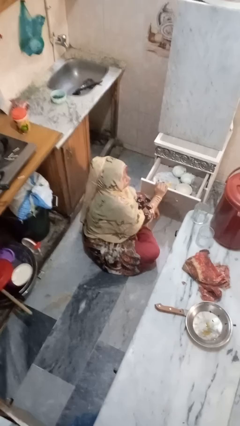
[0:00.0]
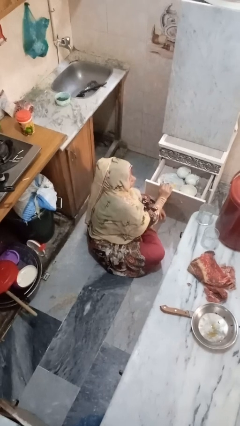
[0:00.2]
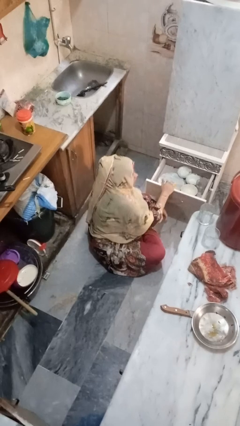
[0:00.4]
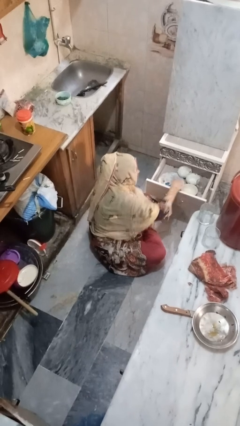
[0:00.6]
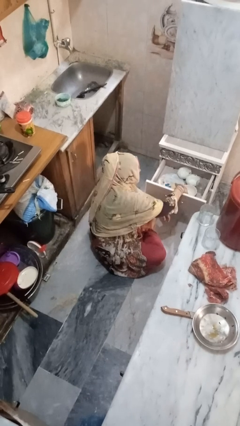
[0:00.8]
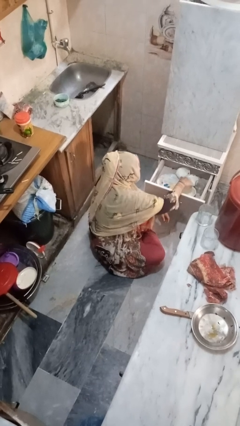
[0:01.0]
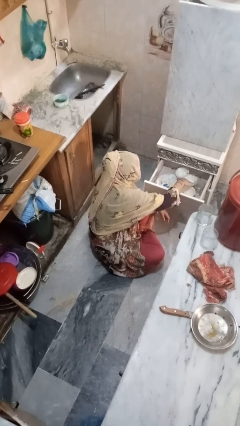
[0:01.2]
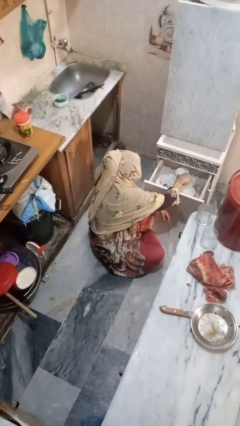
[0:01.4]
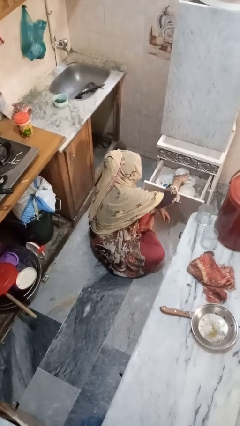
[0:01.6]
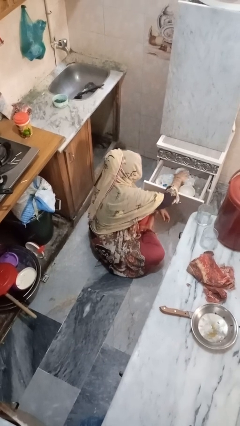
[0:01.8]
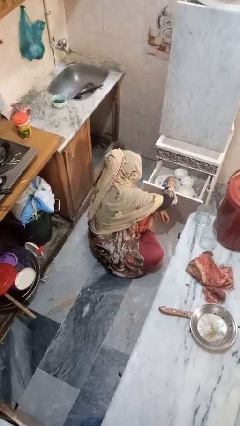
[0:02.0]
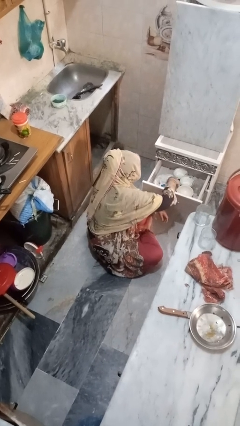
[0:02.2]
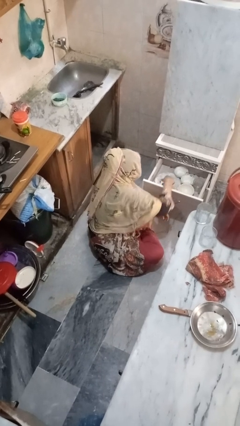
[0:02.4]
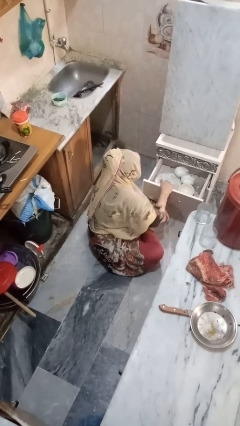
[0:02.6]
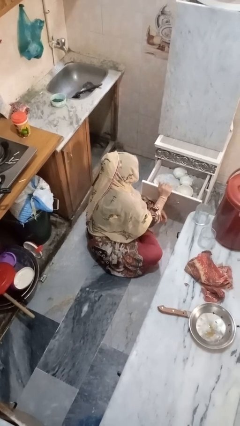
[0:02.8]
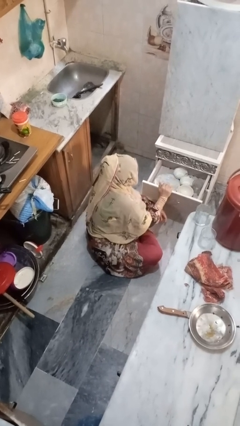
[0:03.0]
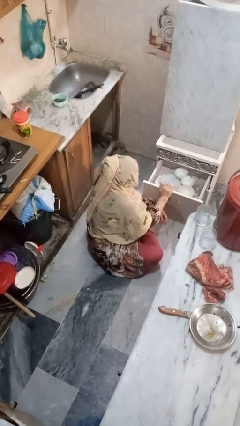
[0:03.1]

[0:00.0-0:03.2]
person searches in kitchen drawer

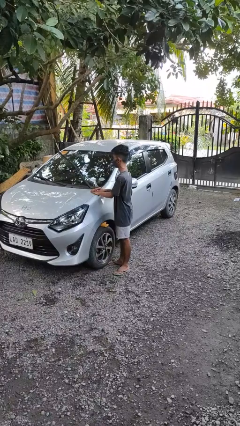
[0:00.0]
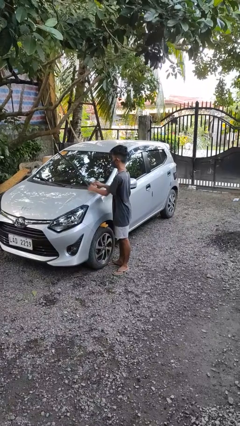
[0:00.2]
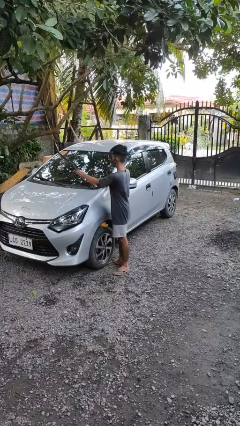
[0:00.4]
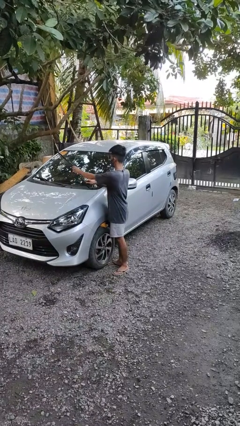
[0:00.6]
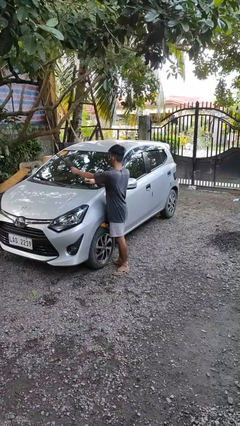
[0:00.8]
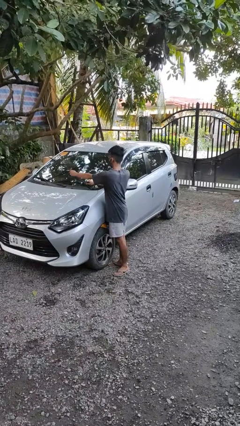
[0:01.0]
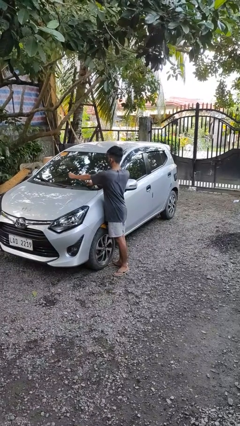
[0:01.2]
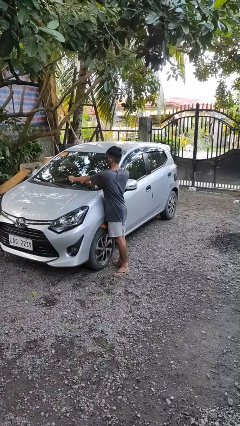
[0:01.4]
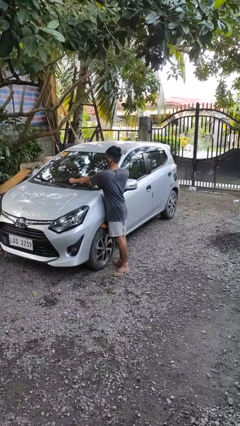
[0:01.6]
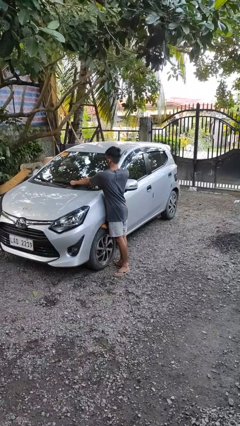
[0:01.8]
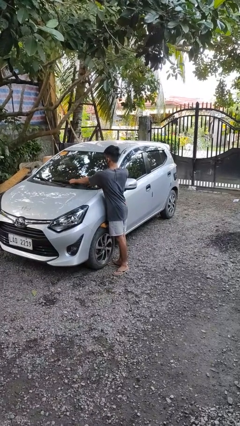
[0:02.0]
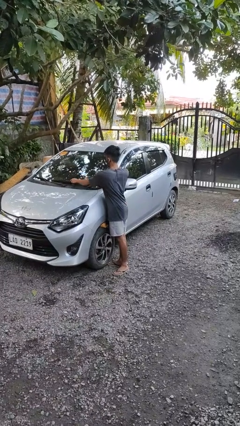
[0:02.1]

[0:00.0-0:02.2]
person flips down car wipers

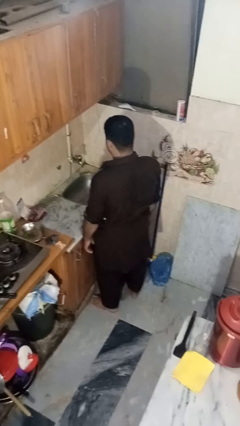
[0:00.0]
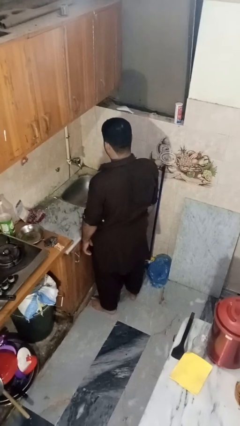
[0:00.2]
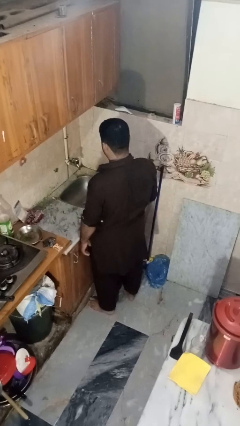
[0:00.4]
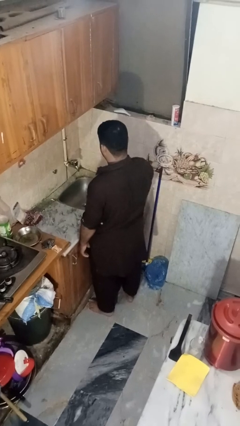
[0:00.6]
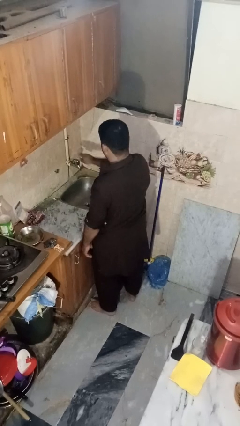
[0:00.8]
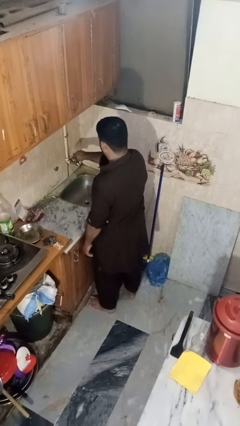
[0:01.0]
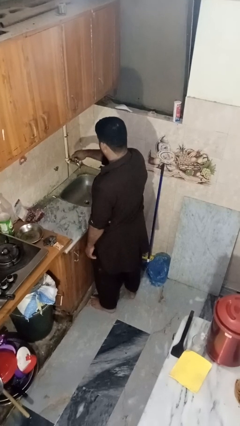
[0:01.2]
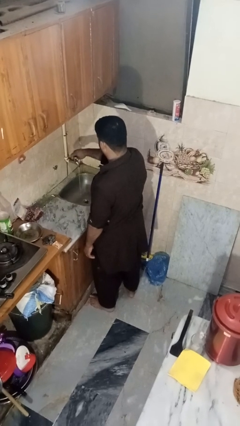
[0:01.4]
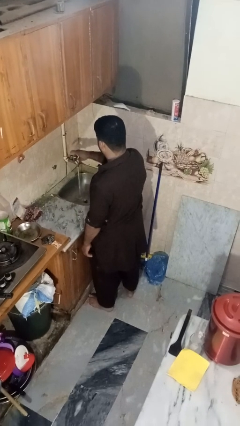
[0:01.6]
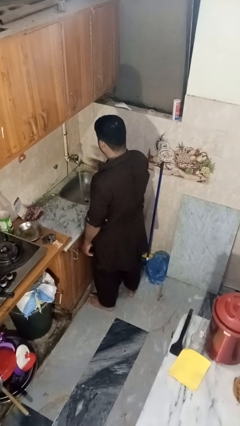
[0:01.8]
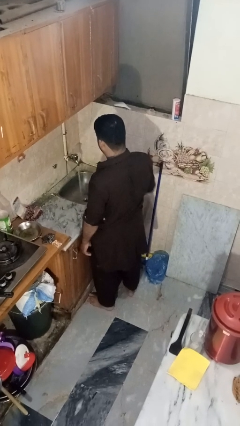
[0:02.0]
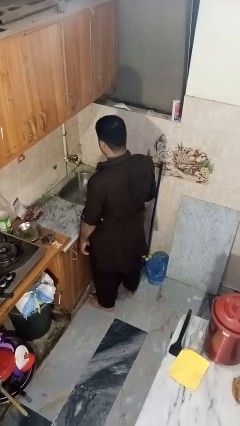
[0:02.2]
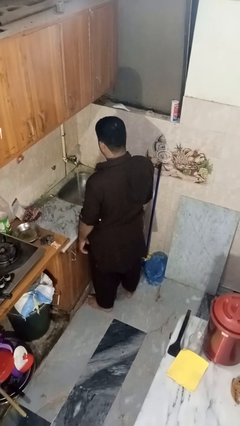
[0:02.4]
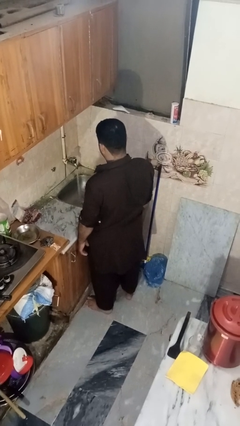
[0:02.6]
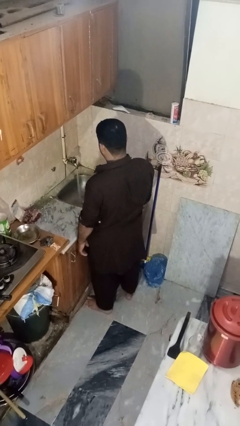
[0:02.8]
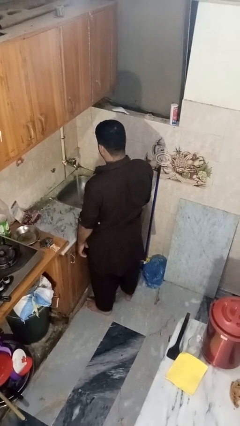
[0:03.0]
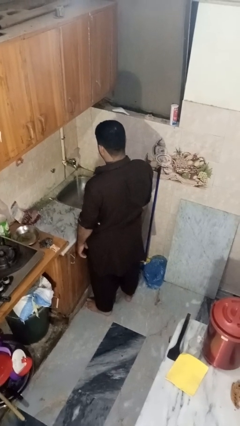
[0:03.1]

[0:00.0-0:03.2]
person turns on faucet

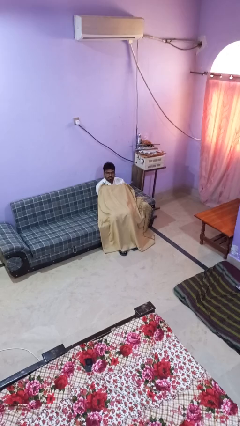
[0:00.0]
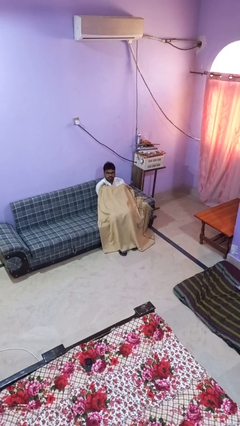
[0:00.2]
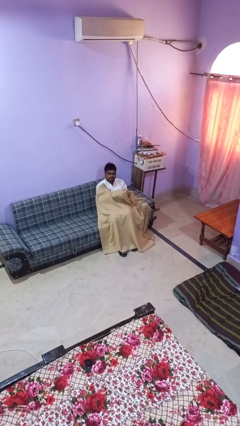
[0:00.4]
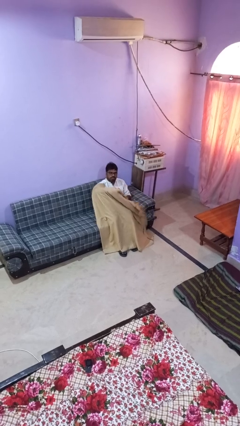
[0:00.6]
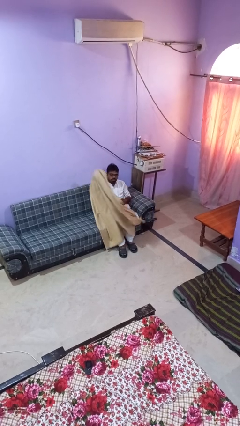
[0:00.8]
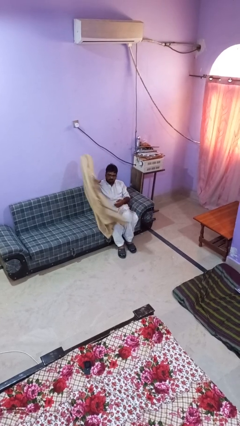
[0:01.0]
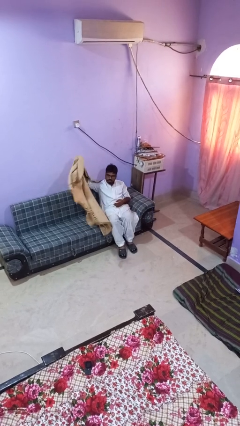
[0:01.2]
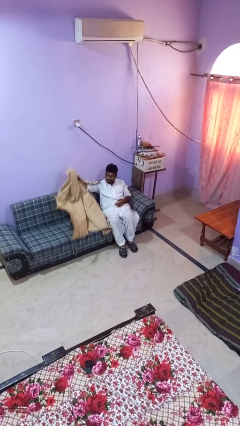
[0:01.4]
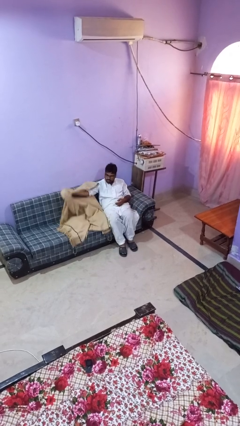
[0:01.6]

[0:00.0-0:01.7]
person uncovers with blanket

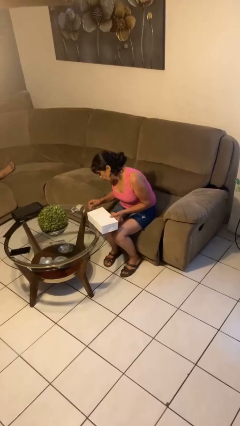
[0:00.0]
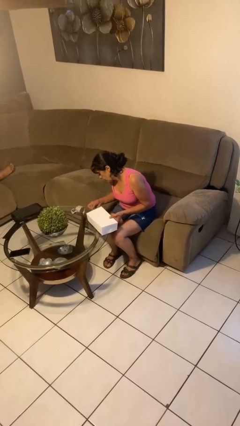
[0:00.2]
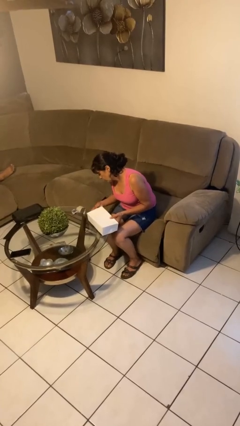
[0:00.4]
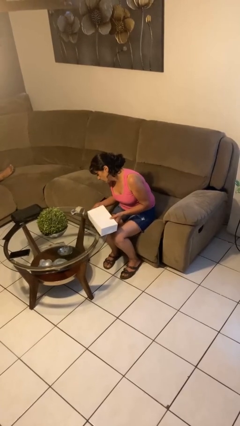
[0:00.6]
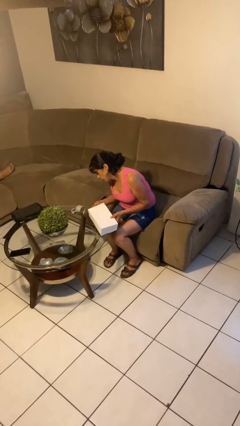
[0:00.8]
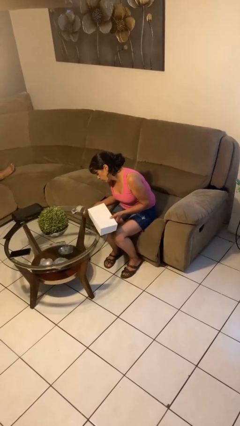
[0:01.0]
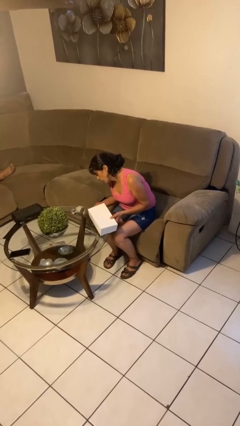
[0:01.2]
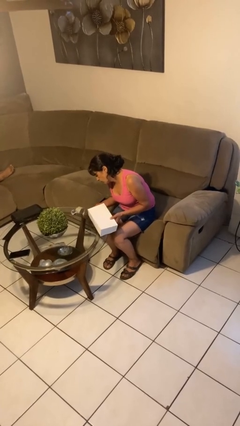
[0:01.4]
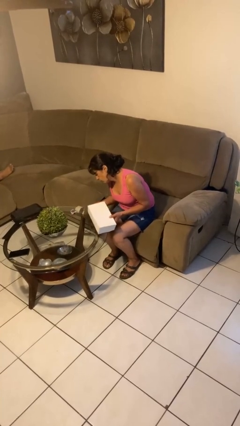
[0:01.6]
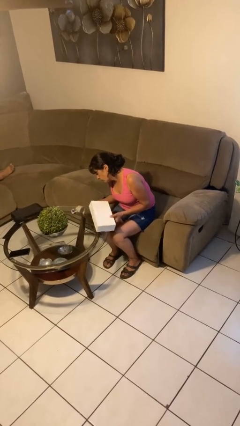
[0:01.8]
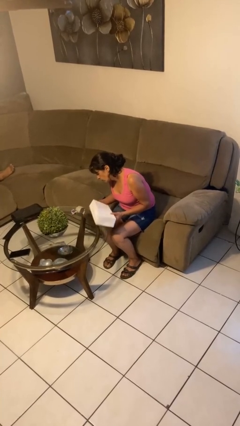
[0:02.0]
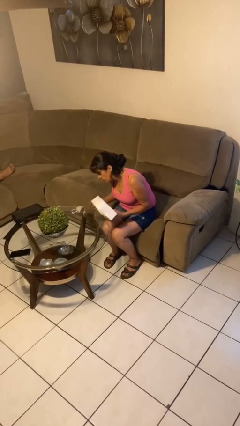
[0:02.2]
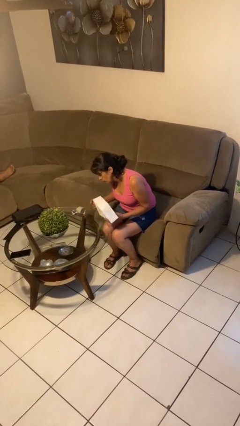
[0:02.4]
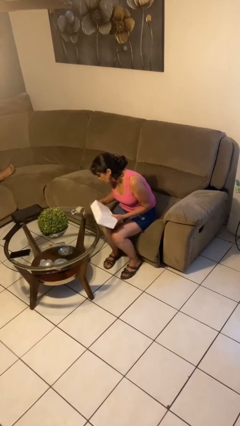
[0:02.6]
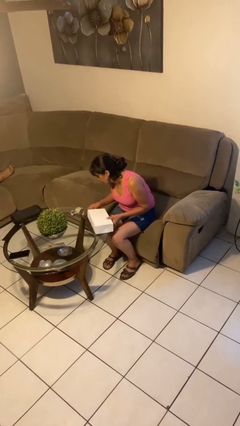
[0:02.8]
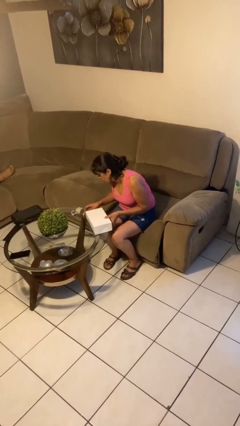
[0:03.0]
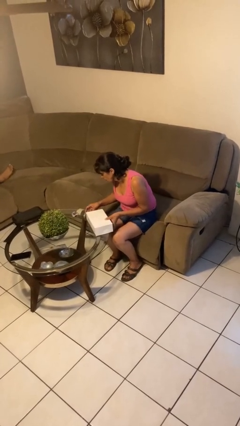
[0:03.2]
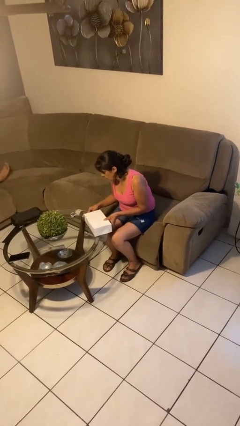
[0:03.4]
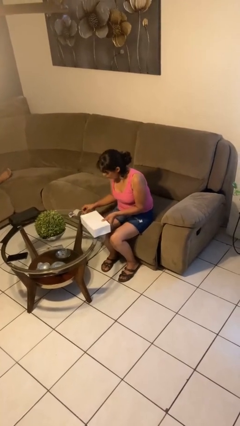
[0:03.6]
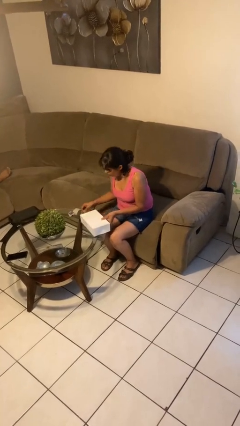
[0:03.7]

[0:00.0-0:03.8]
person wraps box

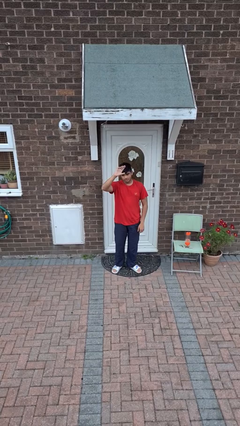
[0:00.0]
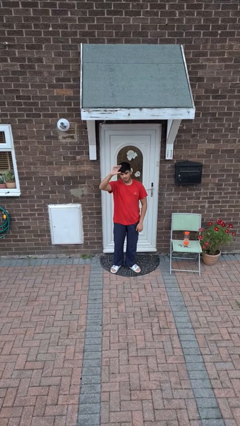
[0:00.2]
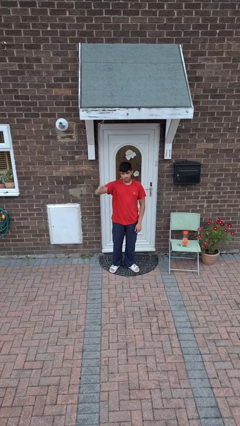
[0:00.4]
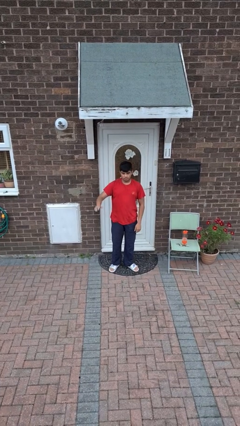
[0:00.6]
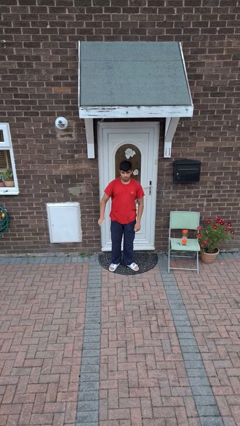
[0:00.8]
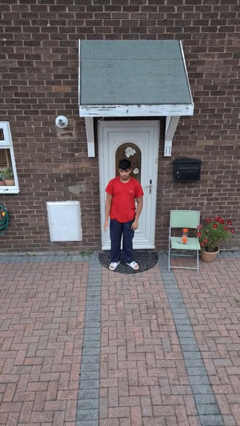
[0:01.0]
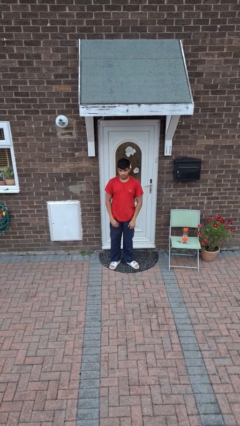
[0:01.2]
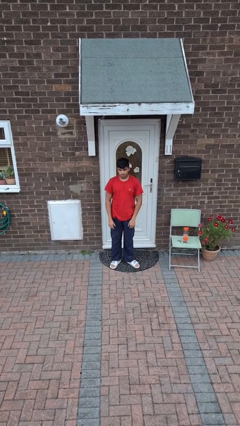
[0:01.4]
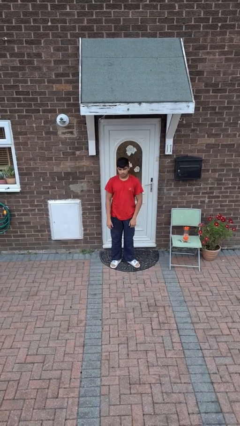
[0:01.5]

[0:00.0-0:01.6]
person gestures lower hand

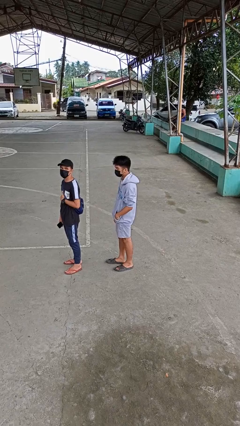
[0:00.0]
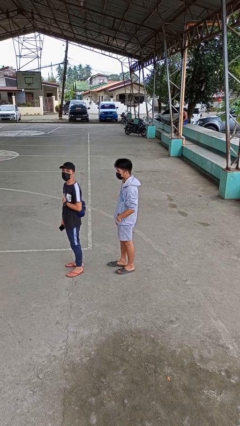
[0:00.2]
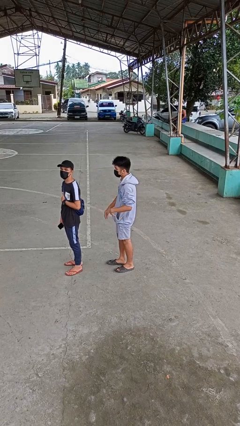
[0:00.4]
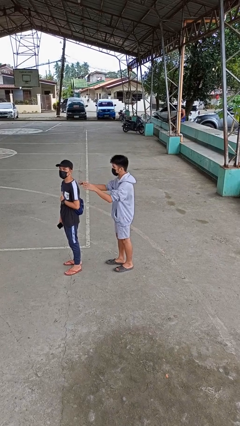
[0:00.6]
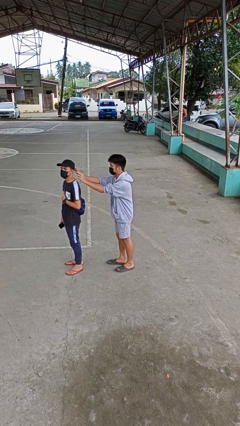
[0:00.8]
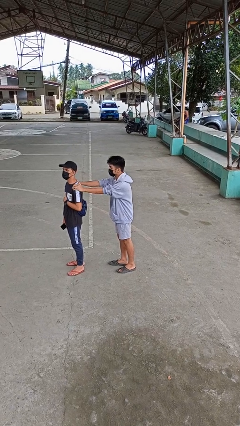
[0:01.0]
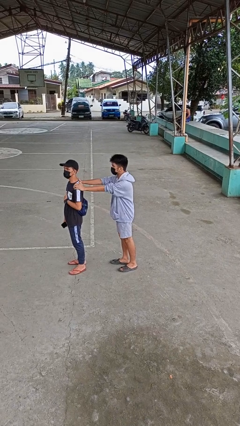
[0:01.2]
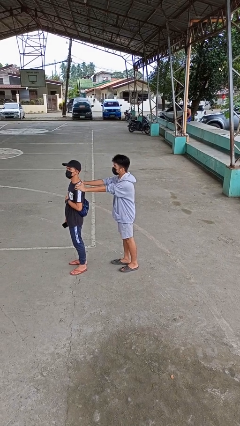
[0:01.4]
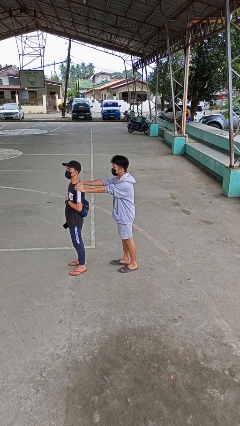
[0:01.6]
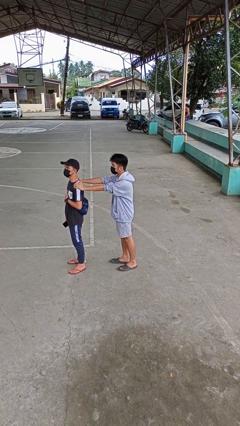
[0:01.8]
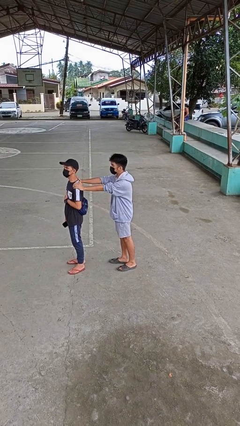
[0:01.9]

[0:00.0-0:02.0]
person grabs person by shoulder
